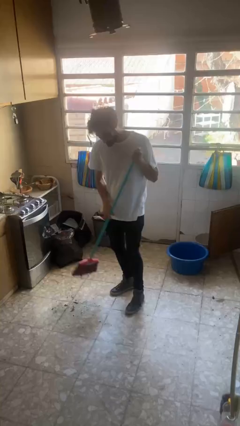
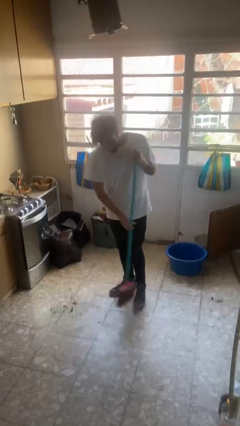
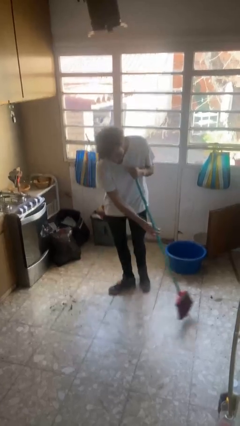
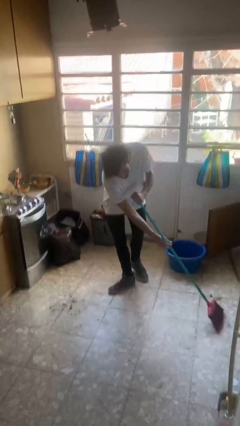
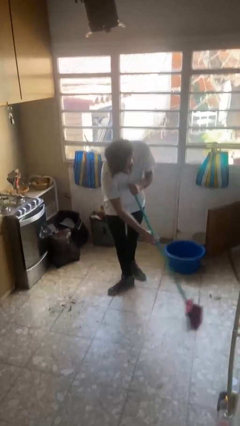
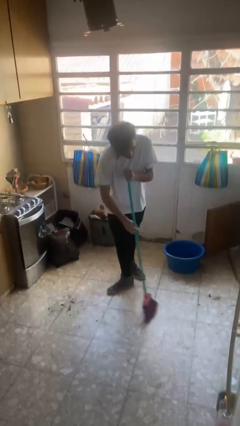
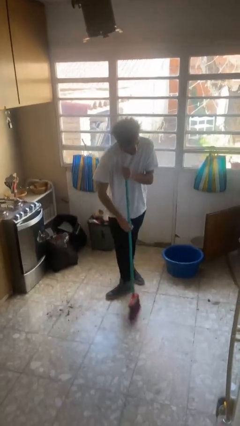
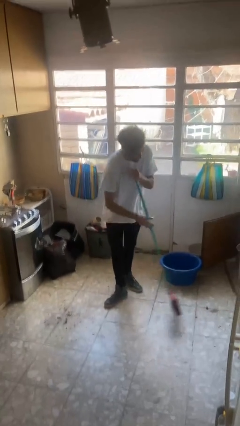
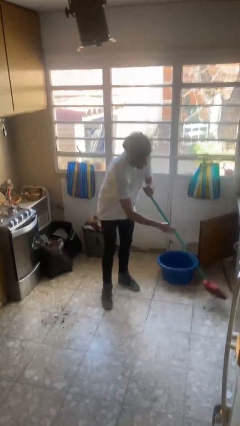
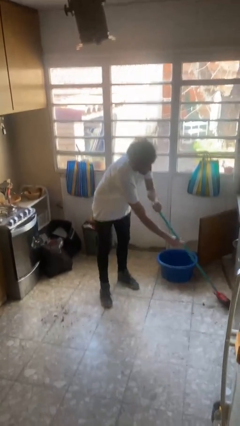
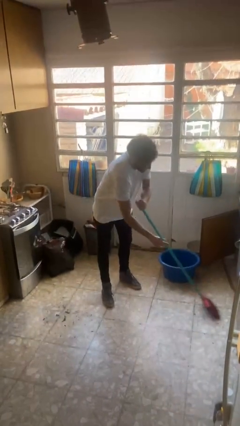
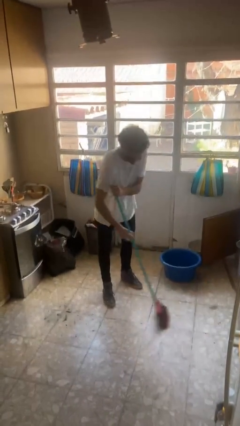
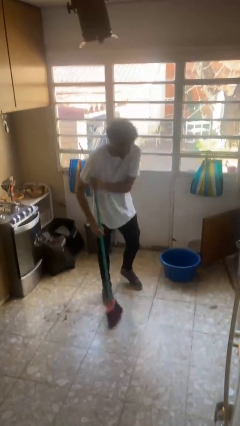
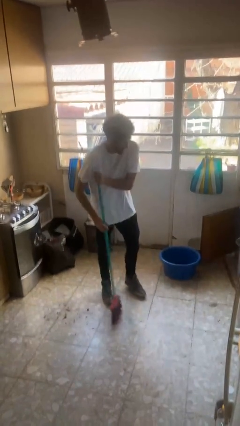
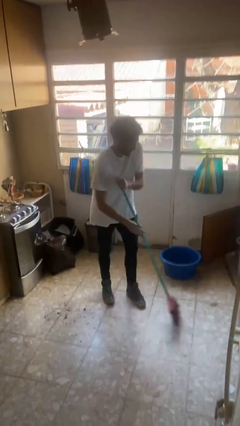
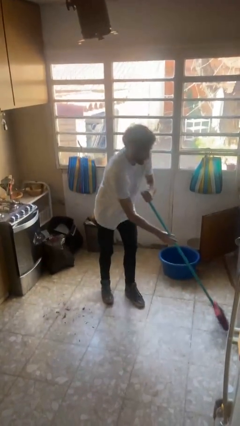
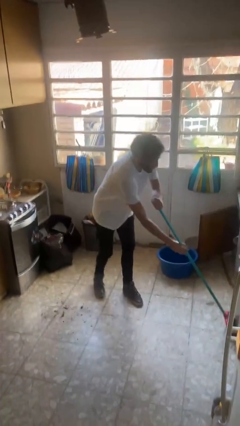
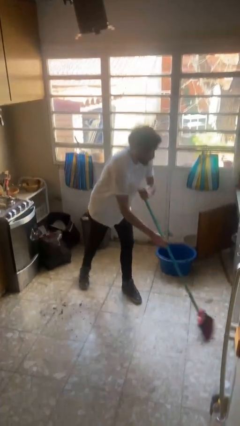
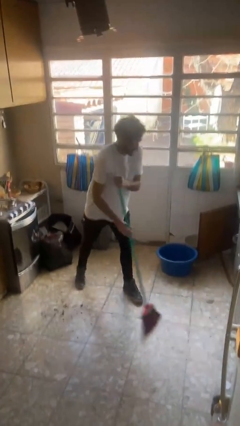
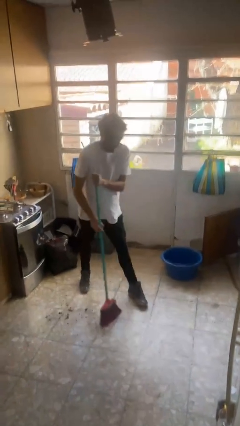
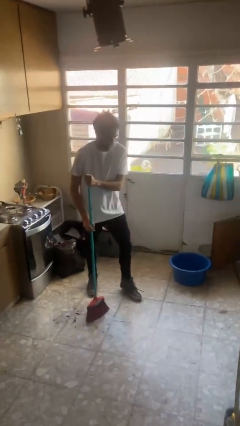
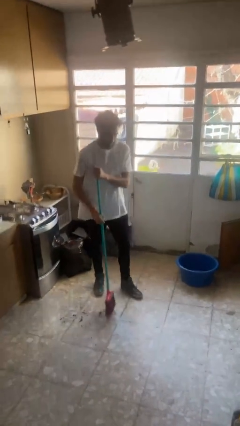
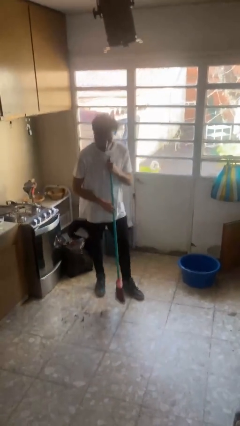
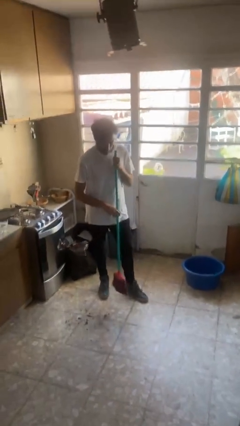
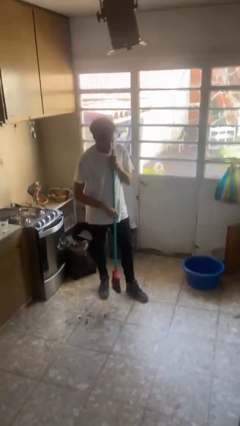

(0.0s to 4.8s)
person sweeps floor

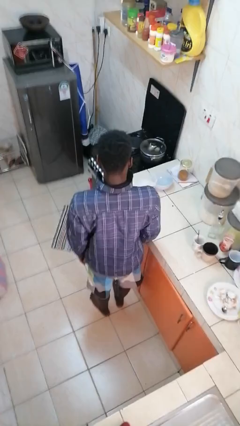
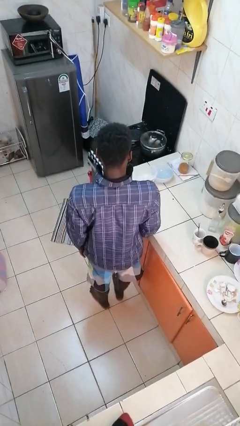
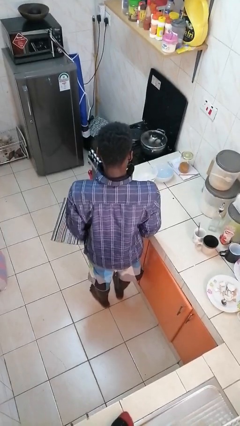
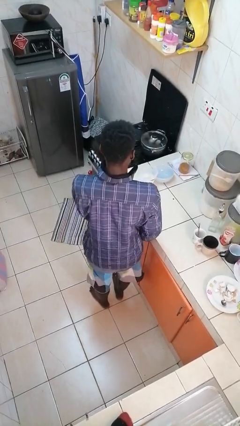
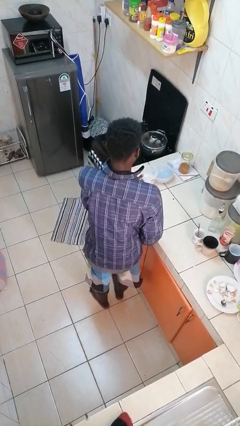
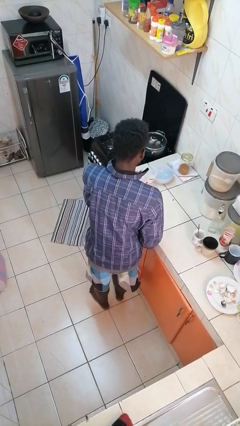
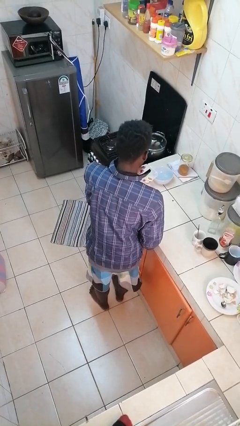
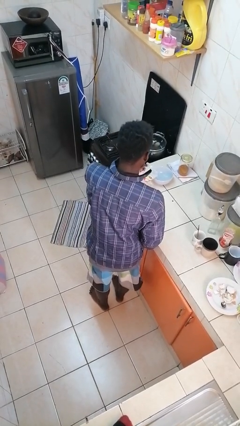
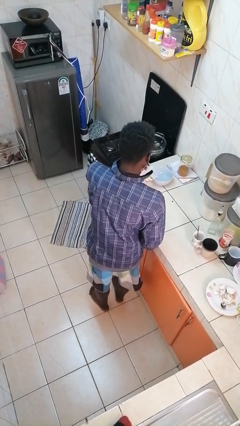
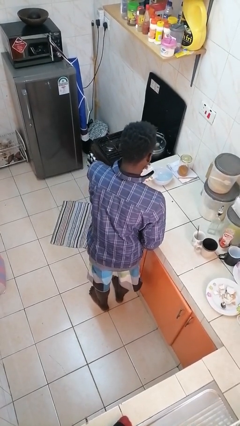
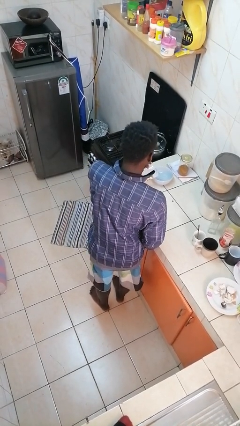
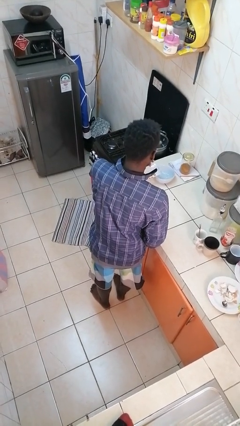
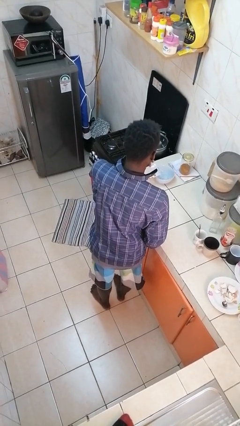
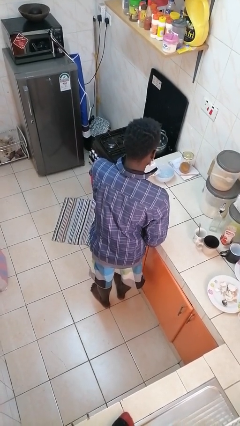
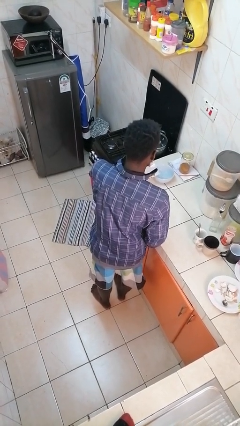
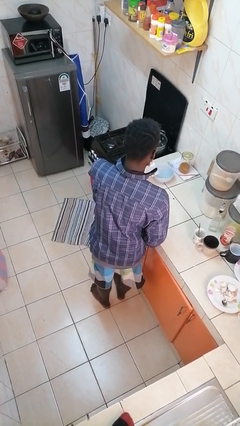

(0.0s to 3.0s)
person pours into bowl

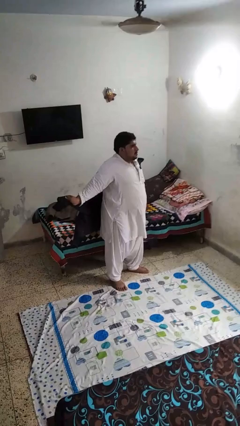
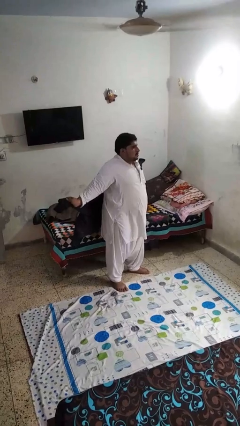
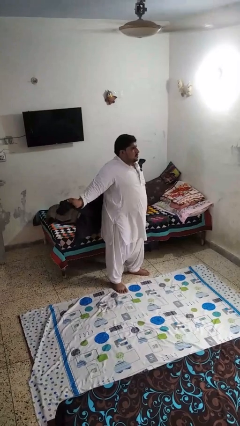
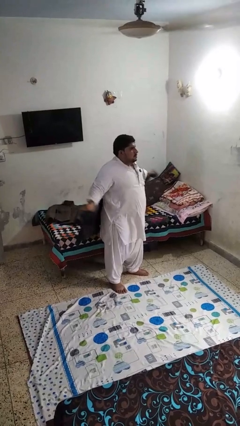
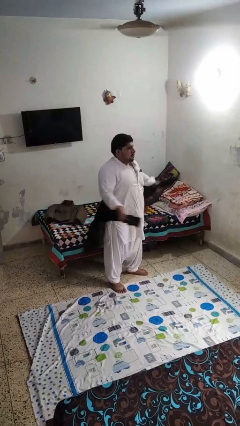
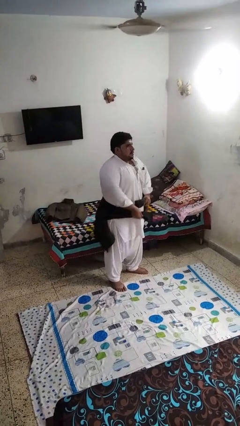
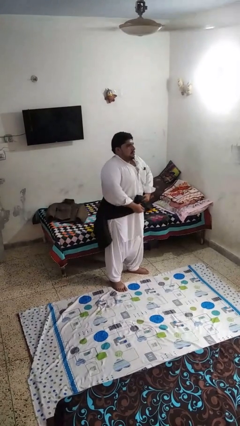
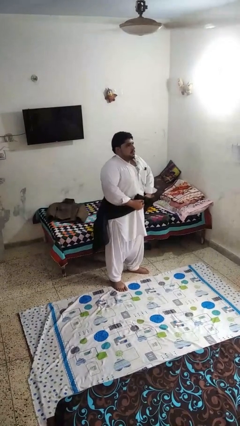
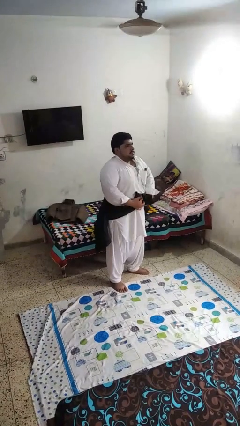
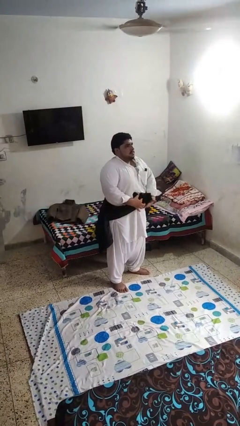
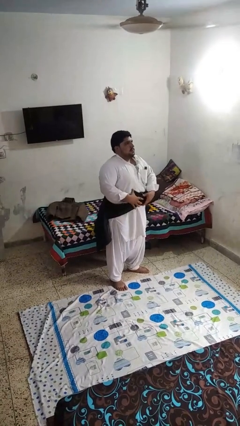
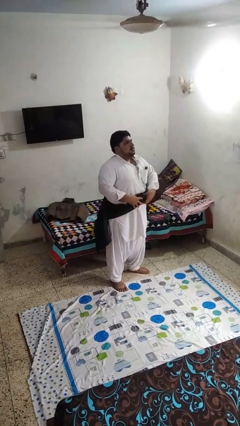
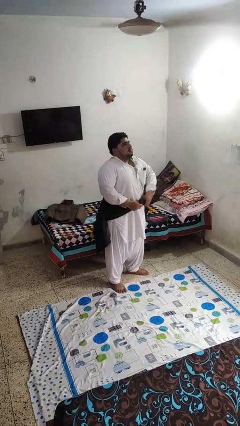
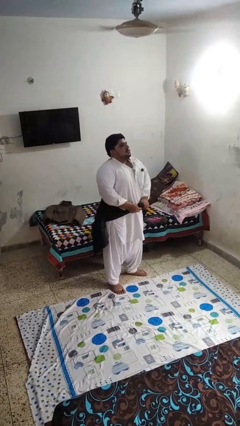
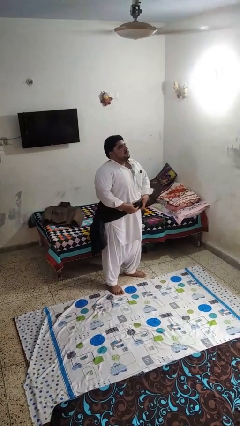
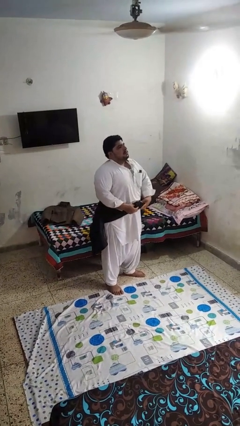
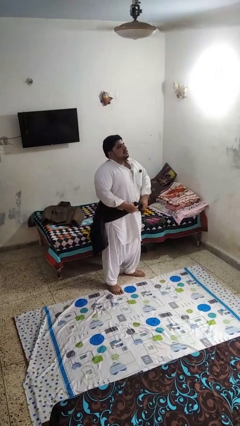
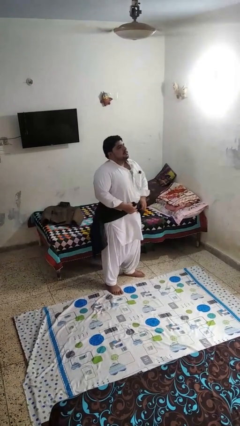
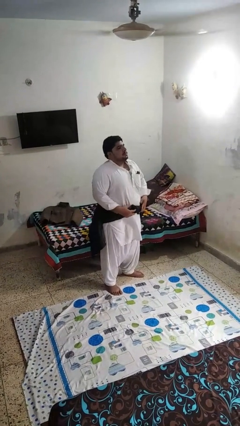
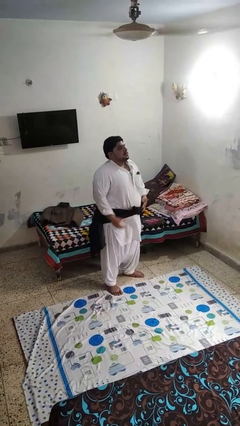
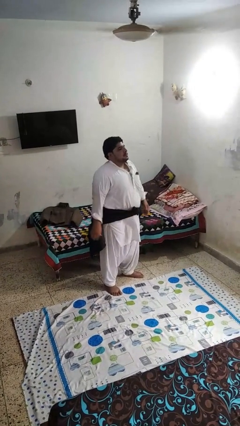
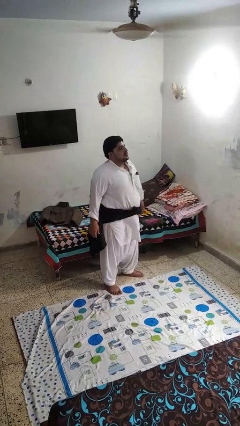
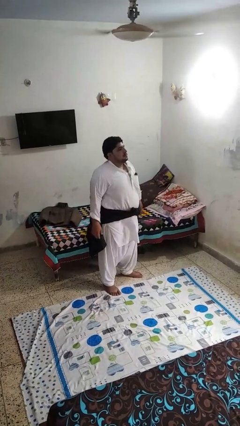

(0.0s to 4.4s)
person ties jacket around waist

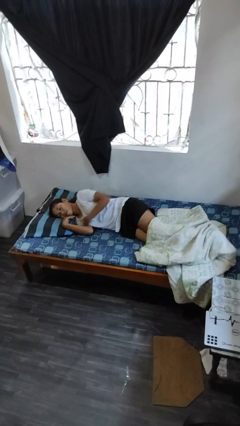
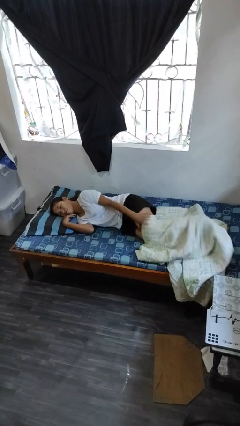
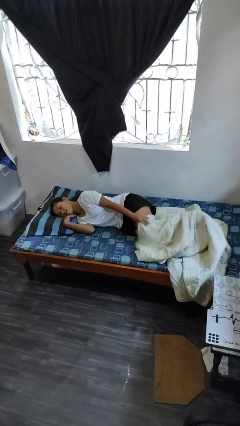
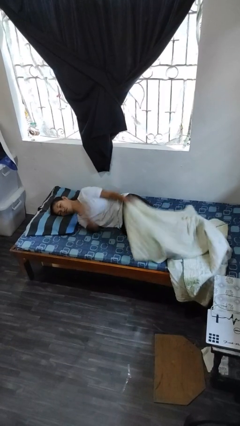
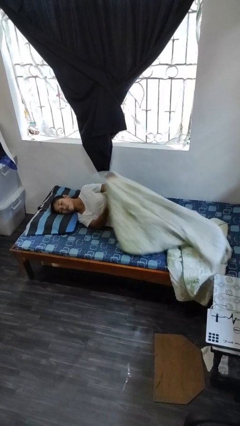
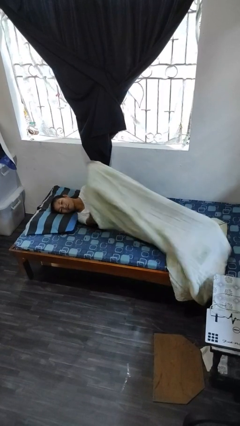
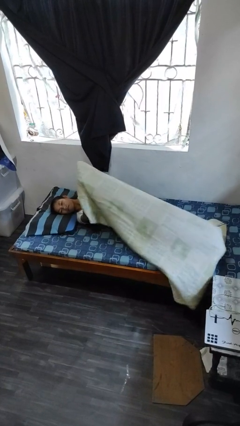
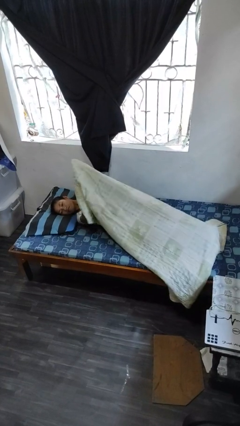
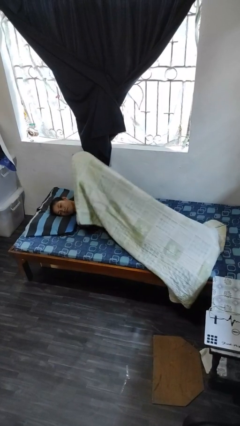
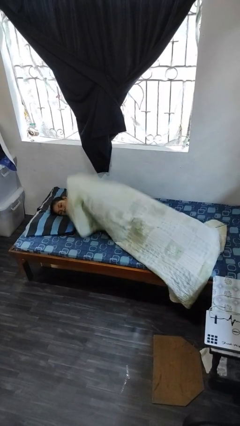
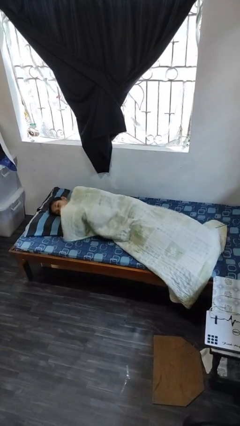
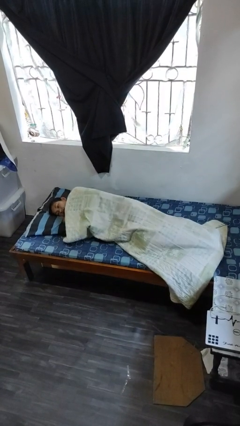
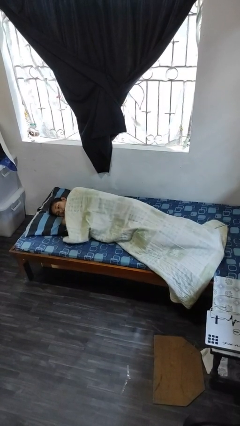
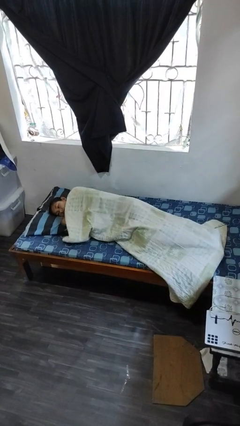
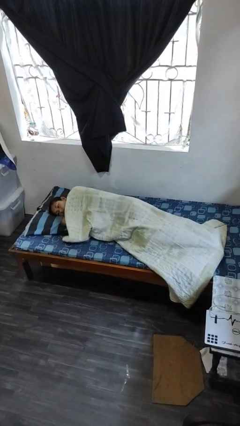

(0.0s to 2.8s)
person covers with bedsheets

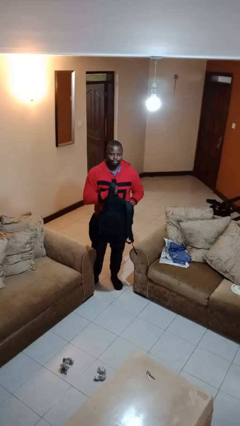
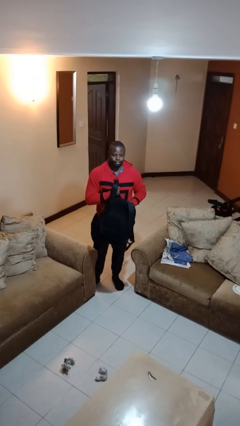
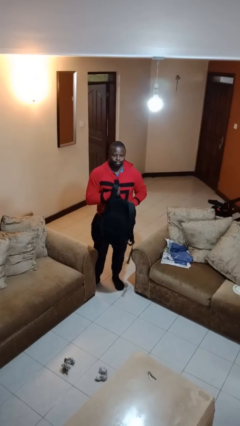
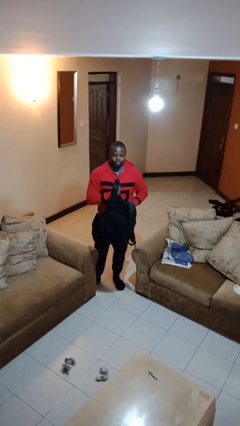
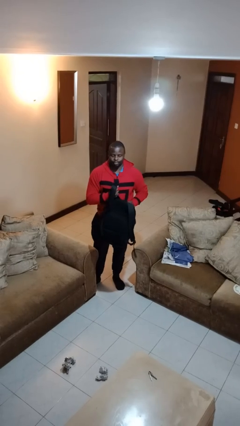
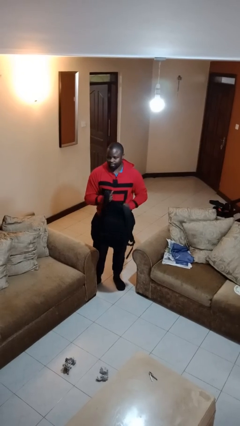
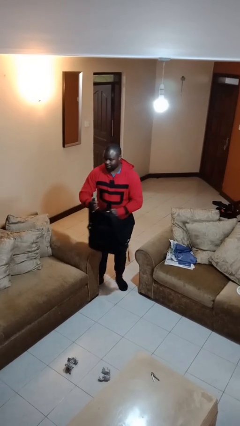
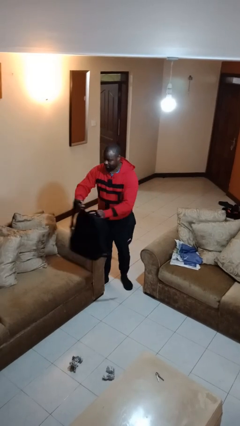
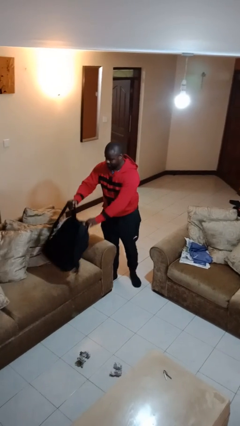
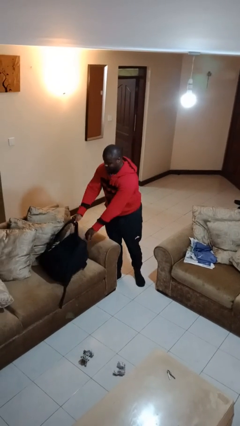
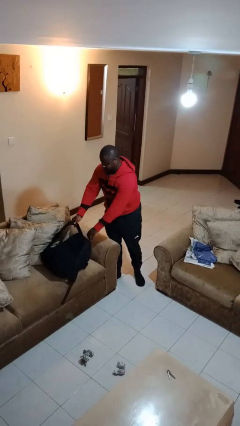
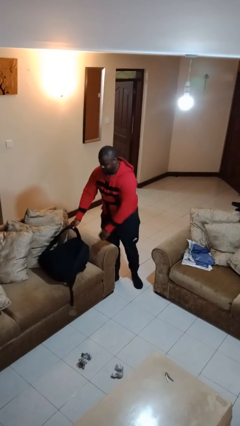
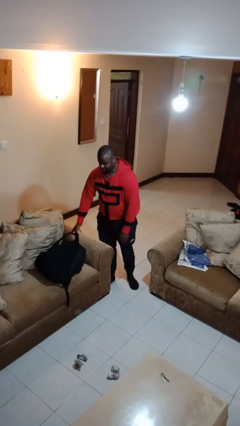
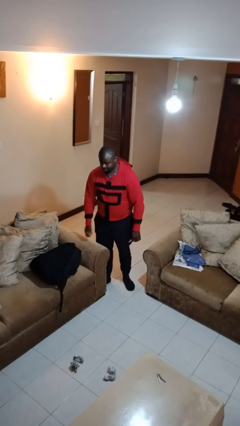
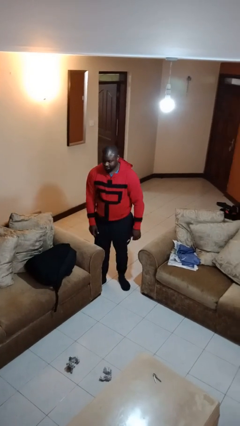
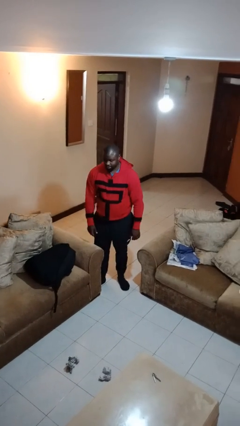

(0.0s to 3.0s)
person puts down object on couch
